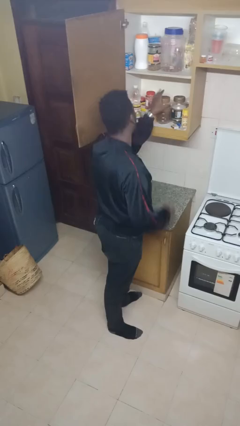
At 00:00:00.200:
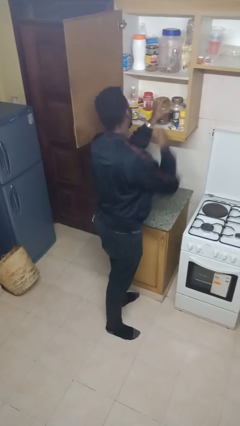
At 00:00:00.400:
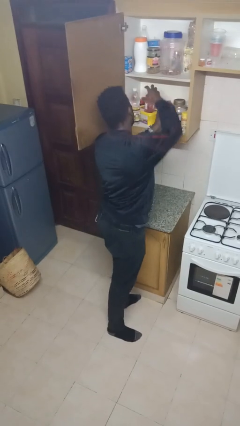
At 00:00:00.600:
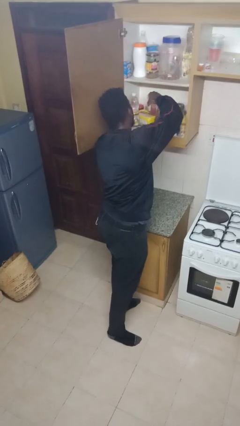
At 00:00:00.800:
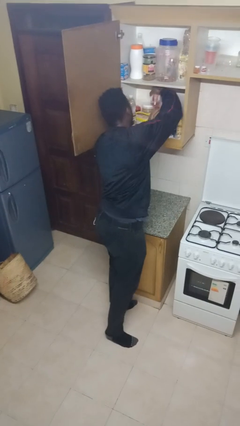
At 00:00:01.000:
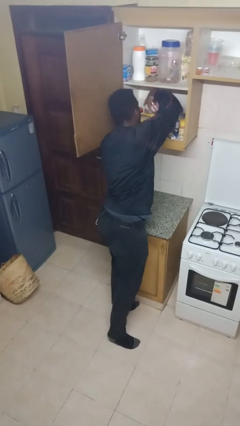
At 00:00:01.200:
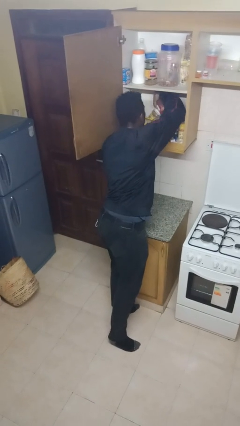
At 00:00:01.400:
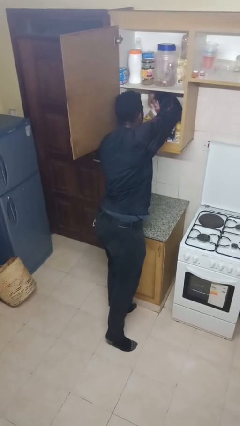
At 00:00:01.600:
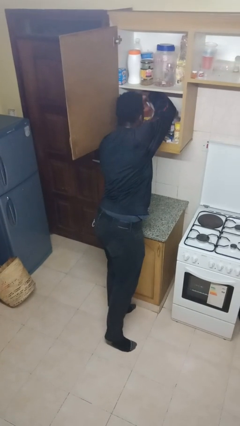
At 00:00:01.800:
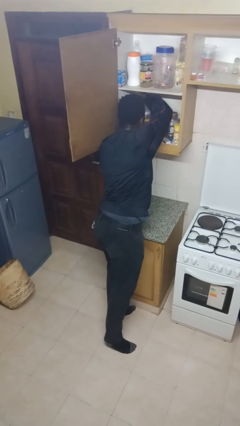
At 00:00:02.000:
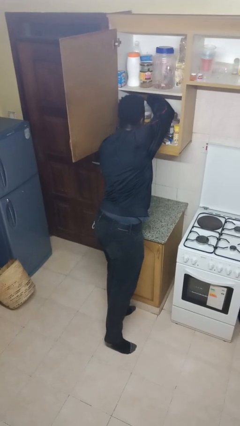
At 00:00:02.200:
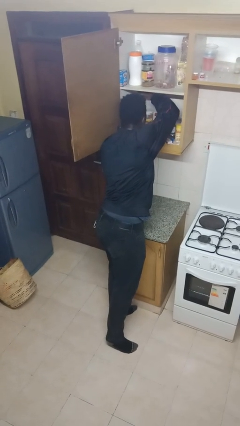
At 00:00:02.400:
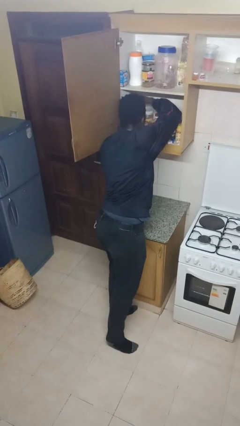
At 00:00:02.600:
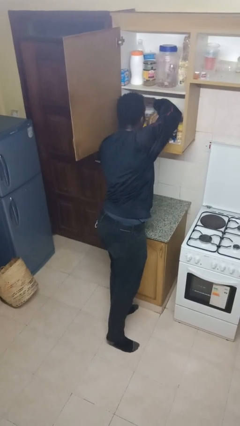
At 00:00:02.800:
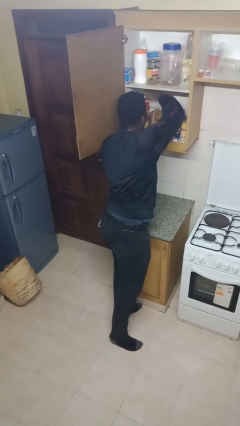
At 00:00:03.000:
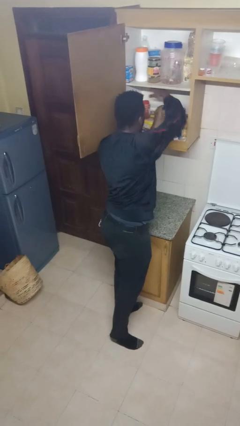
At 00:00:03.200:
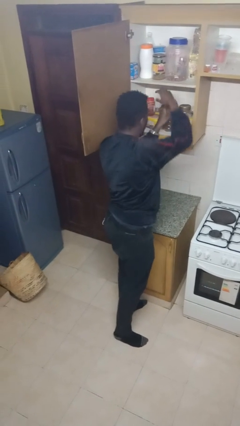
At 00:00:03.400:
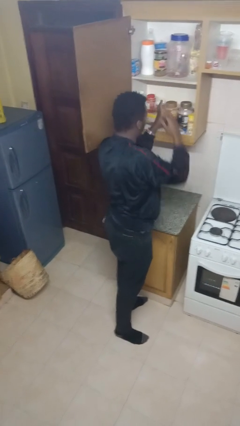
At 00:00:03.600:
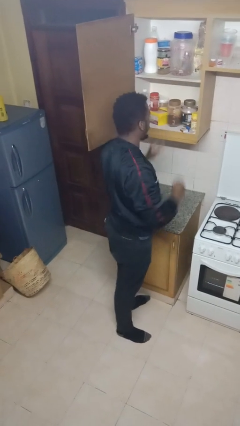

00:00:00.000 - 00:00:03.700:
person searches in cabinet

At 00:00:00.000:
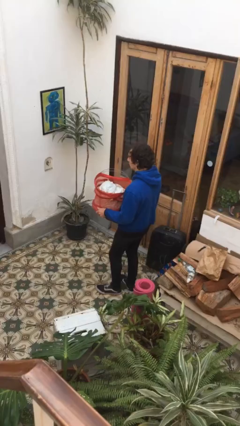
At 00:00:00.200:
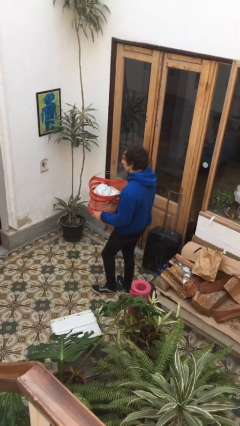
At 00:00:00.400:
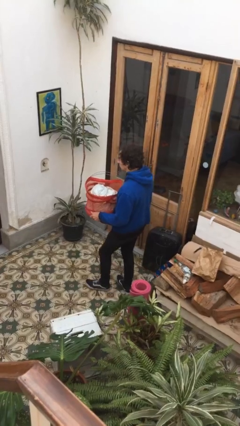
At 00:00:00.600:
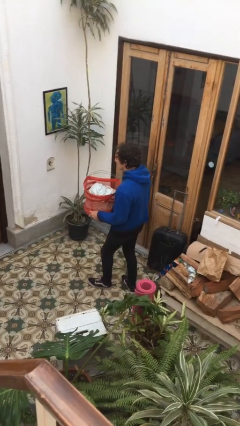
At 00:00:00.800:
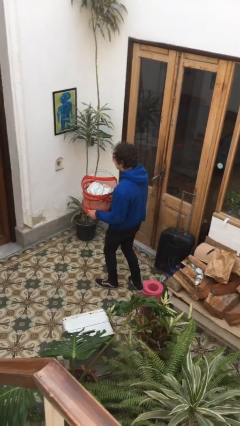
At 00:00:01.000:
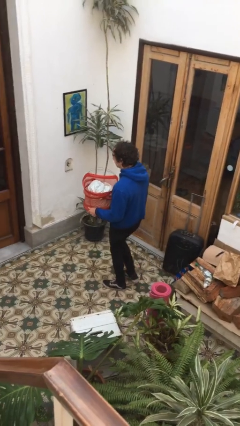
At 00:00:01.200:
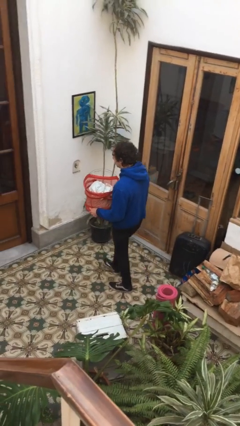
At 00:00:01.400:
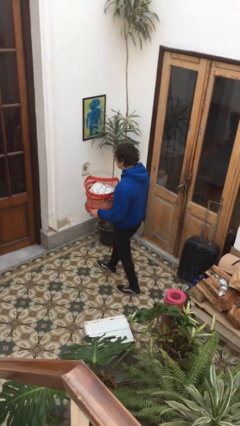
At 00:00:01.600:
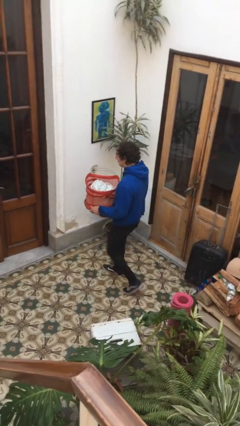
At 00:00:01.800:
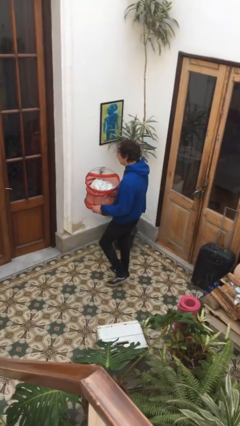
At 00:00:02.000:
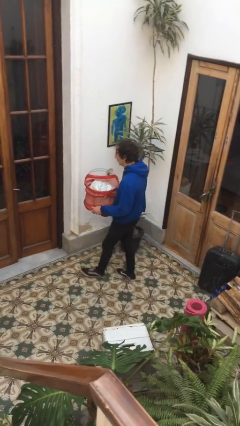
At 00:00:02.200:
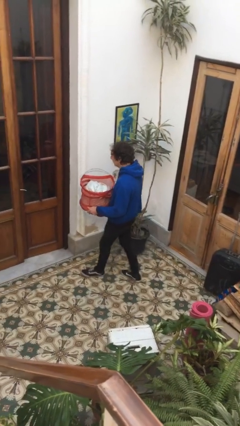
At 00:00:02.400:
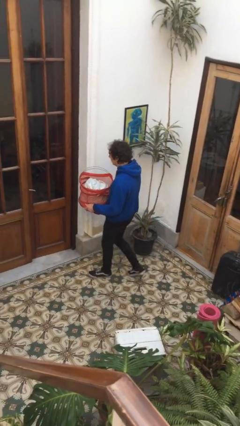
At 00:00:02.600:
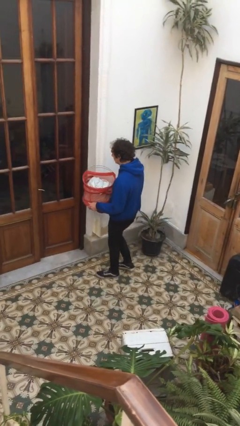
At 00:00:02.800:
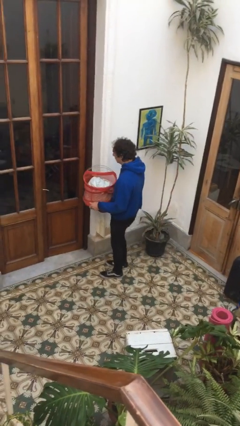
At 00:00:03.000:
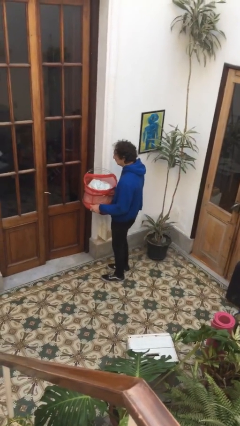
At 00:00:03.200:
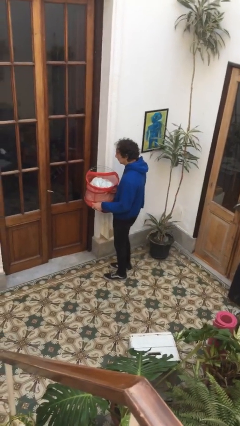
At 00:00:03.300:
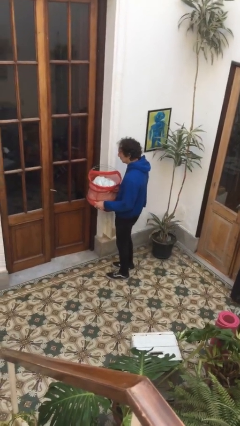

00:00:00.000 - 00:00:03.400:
person carries laundry basket

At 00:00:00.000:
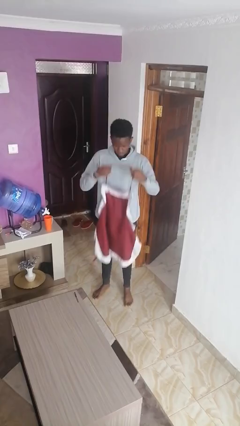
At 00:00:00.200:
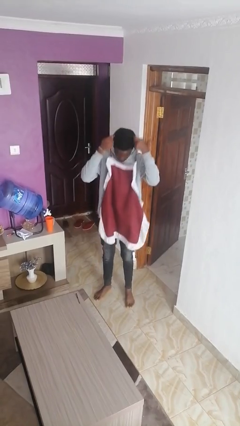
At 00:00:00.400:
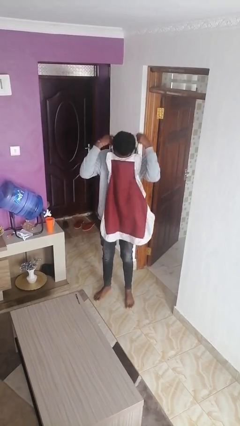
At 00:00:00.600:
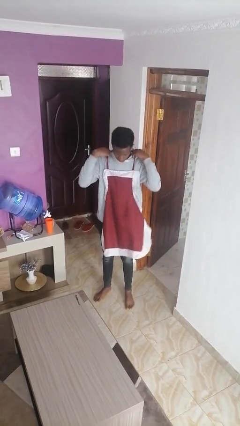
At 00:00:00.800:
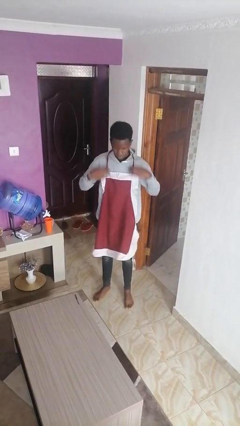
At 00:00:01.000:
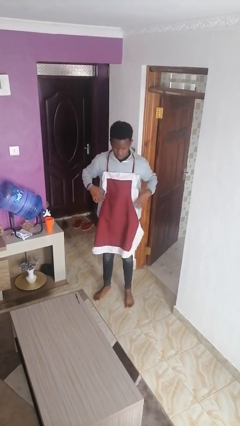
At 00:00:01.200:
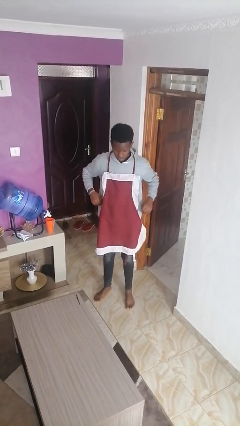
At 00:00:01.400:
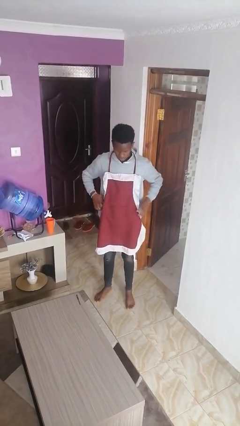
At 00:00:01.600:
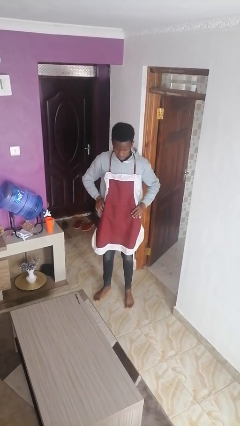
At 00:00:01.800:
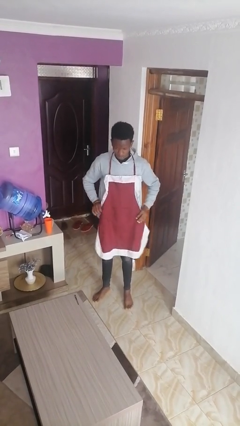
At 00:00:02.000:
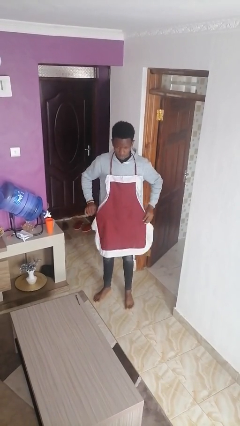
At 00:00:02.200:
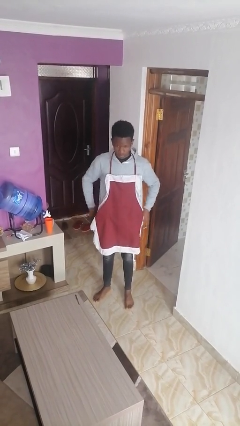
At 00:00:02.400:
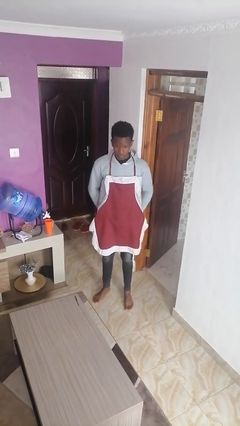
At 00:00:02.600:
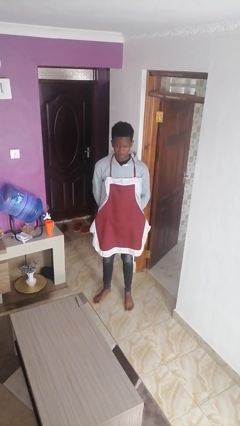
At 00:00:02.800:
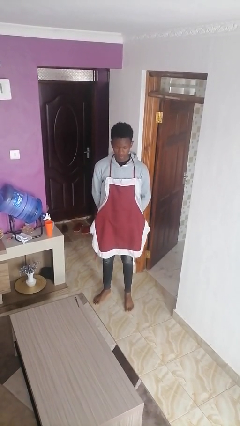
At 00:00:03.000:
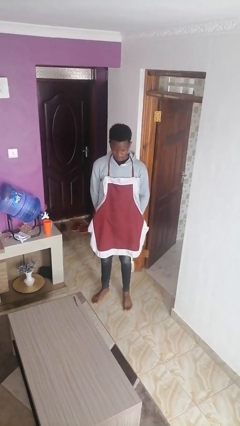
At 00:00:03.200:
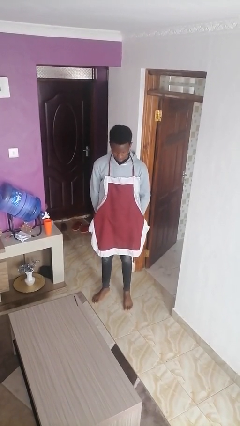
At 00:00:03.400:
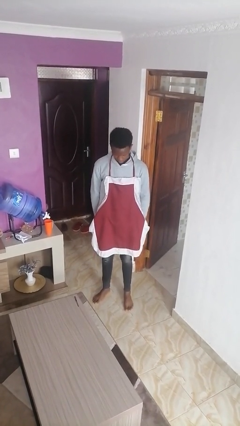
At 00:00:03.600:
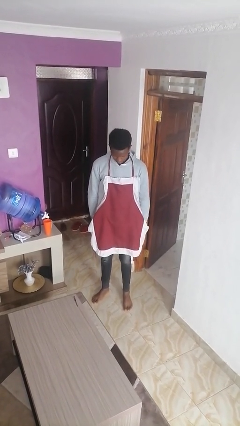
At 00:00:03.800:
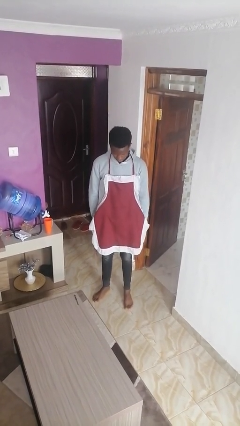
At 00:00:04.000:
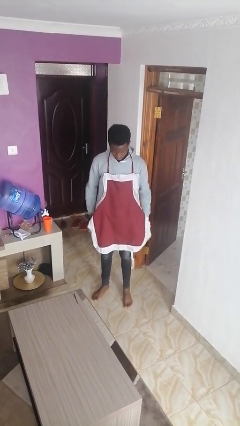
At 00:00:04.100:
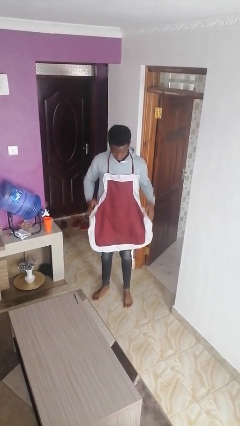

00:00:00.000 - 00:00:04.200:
person puts on apron

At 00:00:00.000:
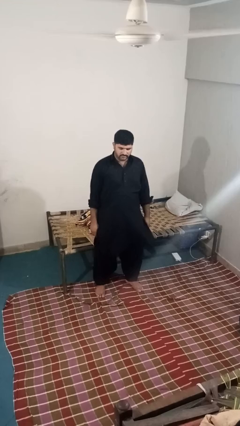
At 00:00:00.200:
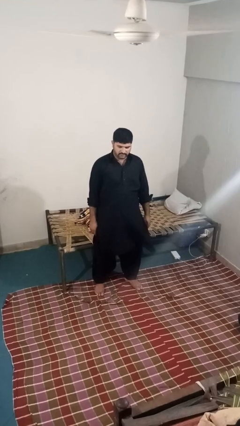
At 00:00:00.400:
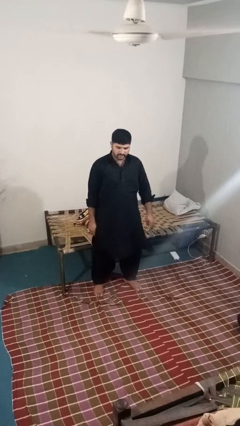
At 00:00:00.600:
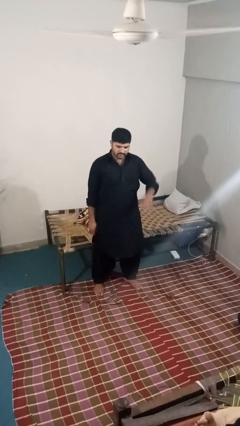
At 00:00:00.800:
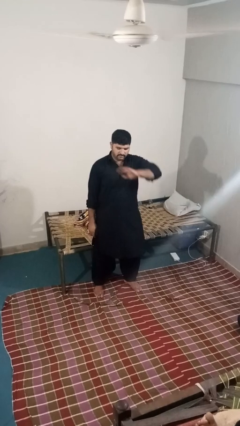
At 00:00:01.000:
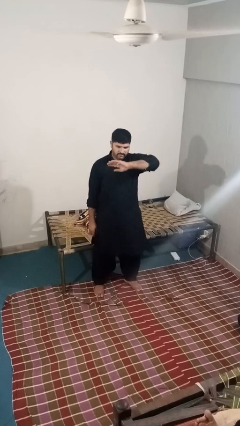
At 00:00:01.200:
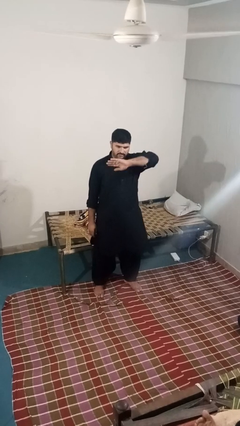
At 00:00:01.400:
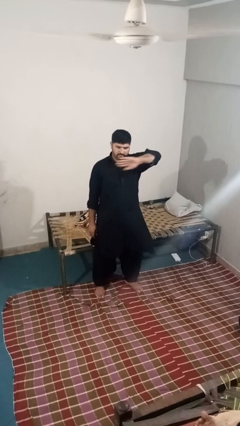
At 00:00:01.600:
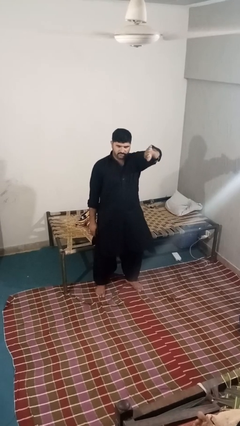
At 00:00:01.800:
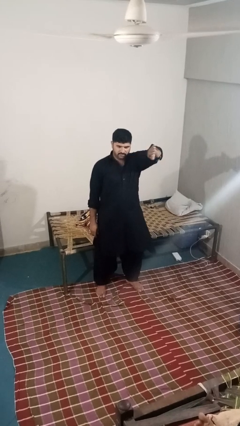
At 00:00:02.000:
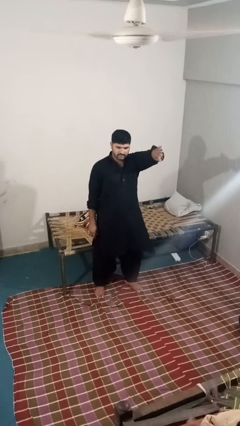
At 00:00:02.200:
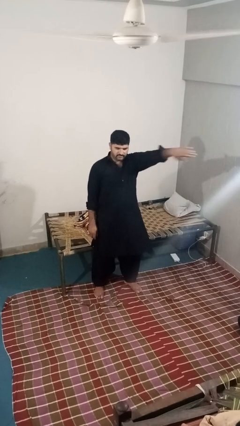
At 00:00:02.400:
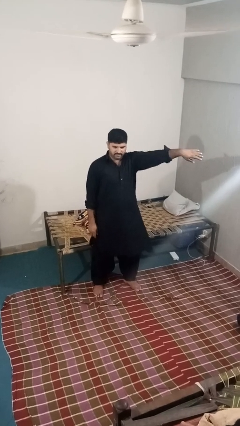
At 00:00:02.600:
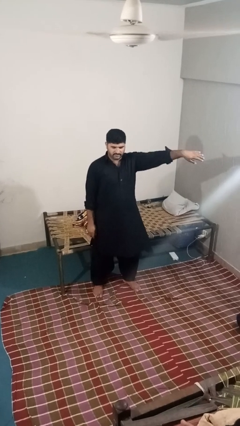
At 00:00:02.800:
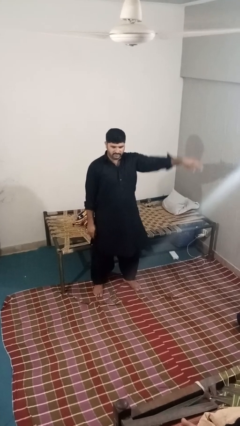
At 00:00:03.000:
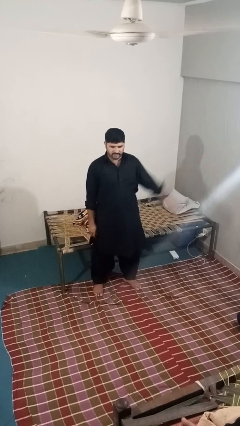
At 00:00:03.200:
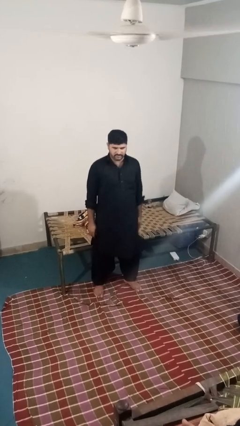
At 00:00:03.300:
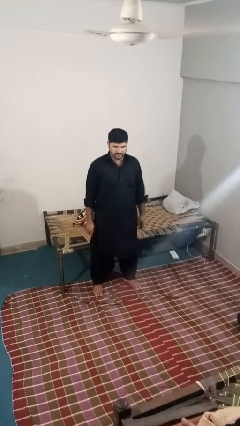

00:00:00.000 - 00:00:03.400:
person gestures swipe left

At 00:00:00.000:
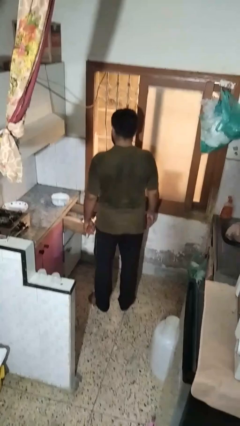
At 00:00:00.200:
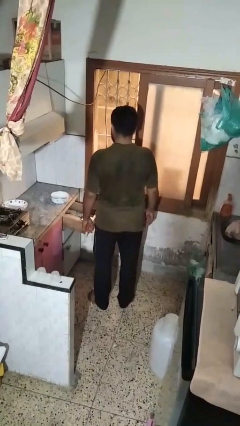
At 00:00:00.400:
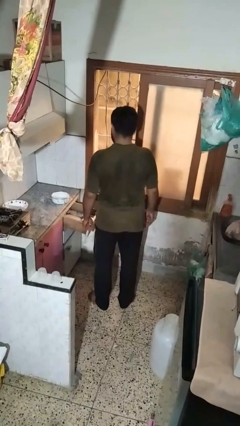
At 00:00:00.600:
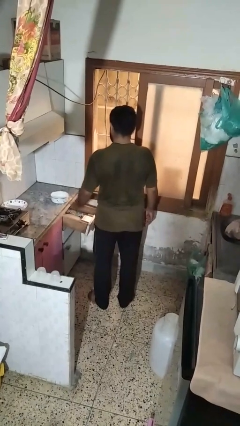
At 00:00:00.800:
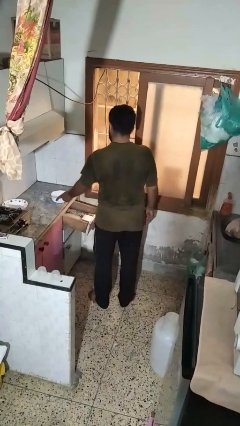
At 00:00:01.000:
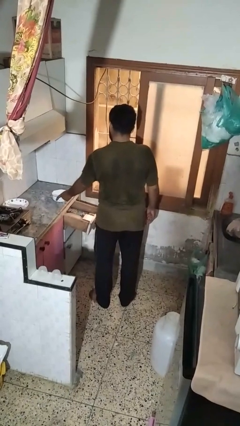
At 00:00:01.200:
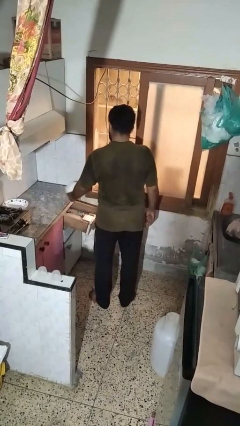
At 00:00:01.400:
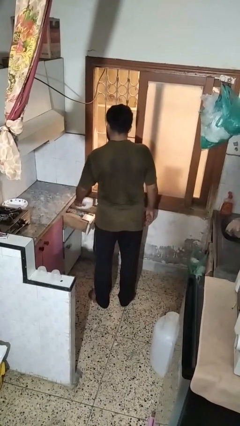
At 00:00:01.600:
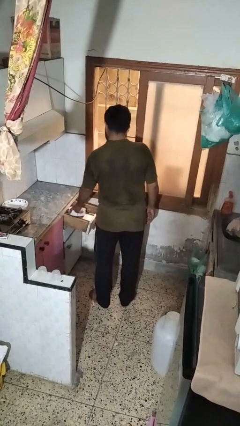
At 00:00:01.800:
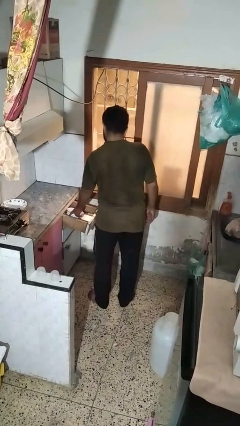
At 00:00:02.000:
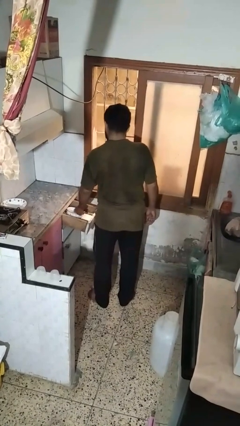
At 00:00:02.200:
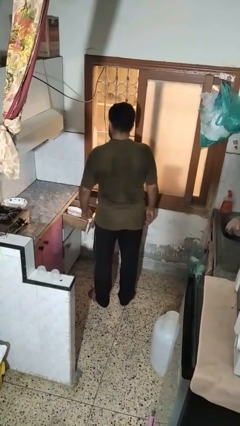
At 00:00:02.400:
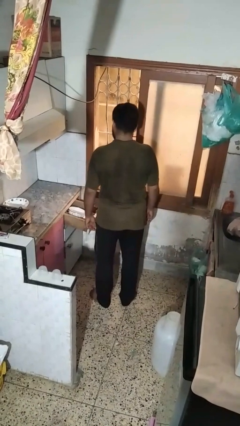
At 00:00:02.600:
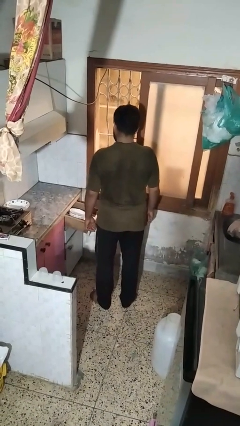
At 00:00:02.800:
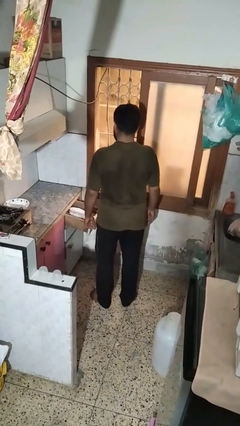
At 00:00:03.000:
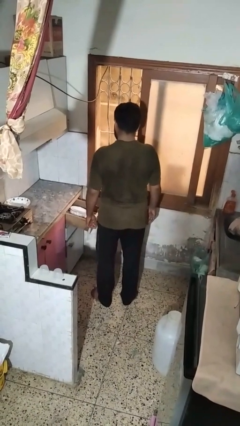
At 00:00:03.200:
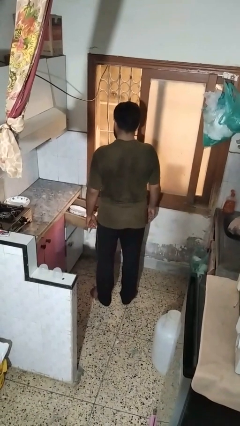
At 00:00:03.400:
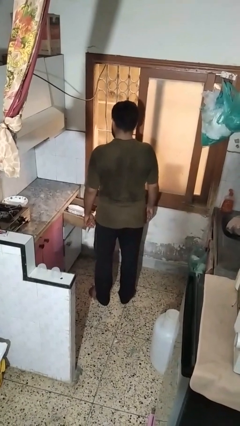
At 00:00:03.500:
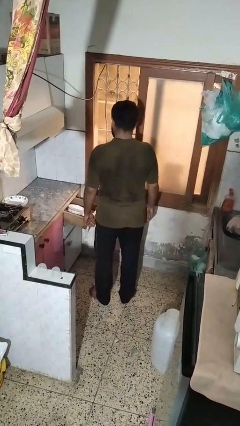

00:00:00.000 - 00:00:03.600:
person puts object into kitchen drawer
